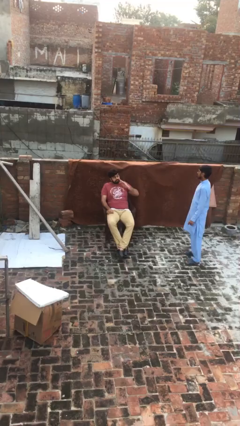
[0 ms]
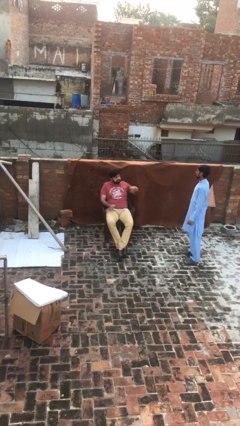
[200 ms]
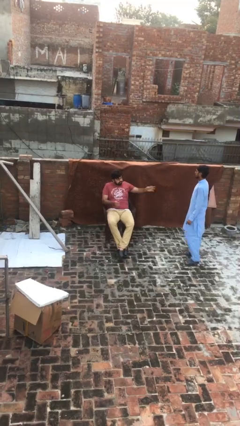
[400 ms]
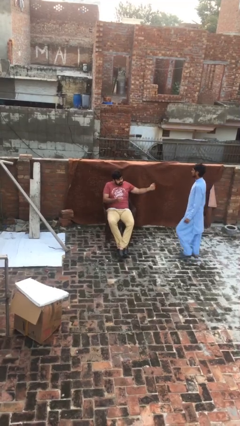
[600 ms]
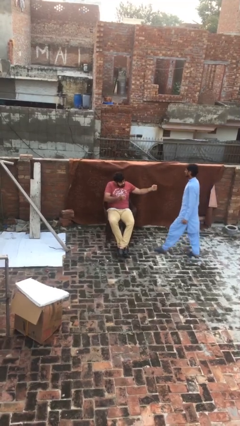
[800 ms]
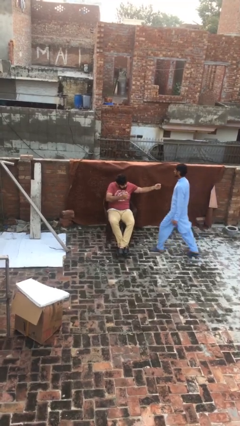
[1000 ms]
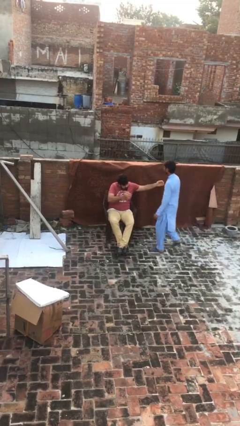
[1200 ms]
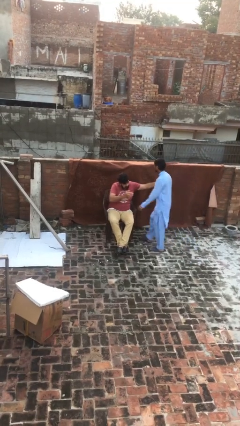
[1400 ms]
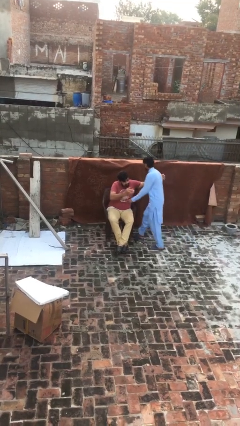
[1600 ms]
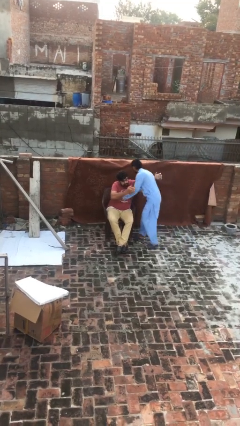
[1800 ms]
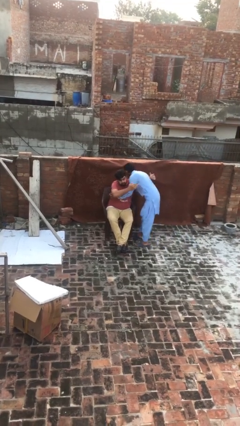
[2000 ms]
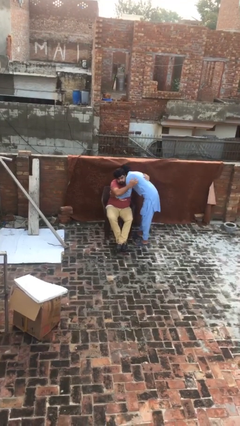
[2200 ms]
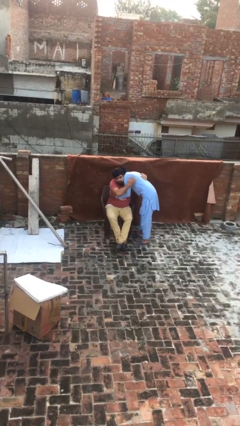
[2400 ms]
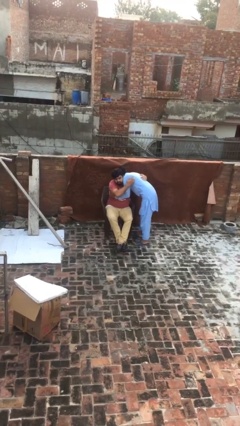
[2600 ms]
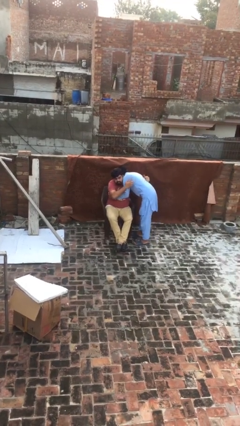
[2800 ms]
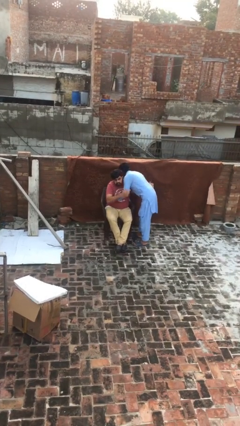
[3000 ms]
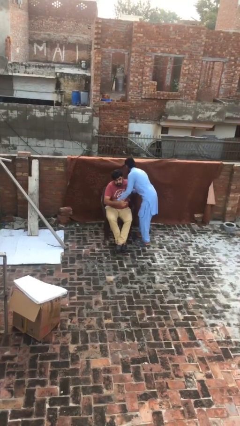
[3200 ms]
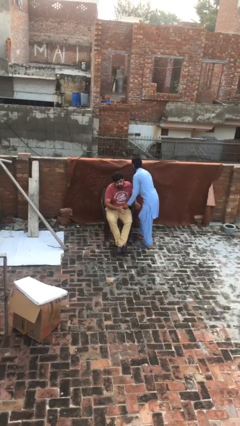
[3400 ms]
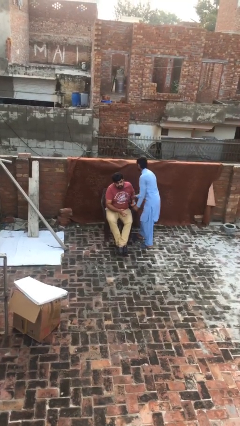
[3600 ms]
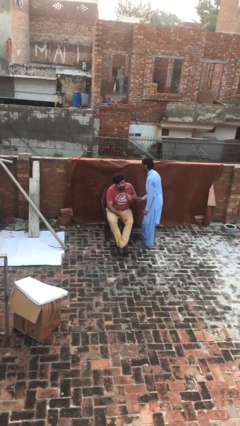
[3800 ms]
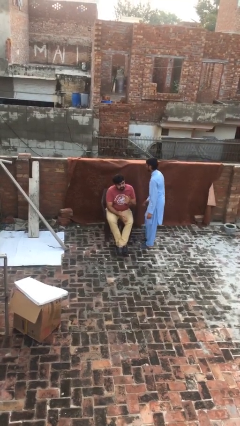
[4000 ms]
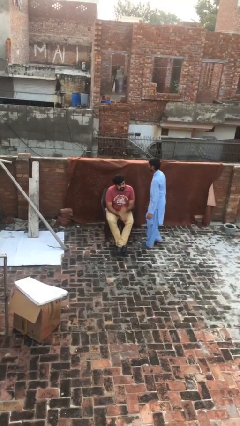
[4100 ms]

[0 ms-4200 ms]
person embraces person

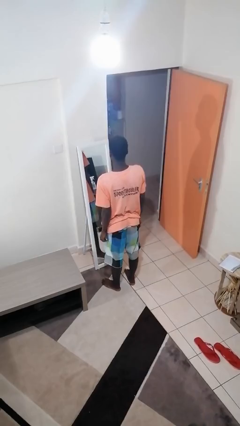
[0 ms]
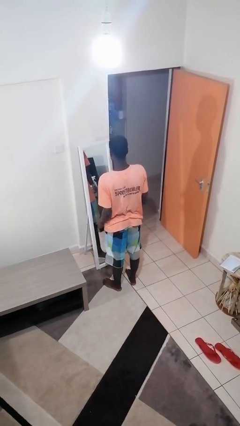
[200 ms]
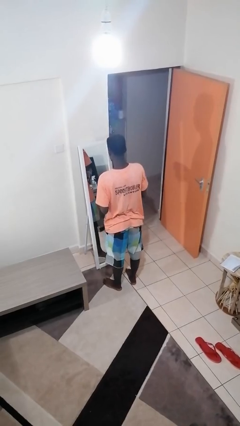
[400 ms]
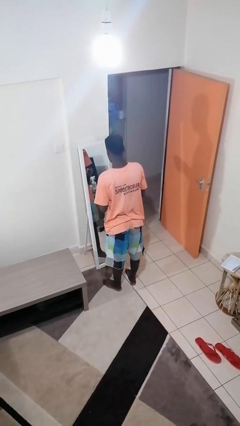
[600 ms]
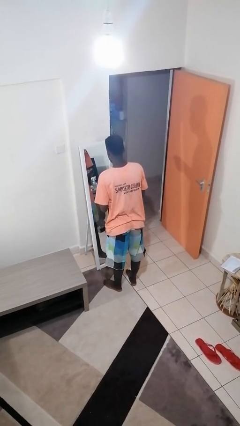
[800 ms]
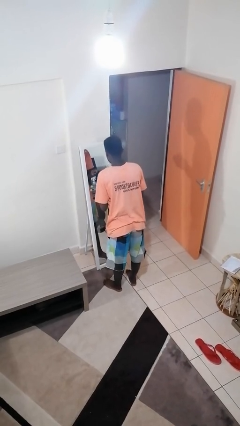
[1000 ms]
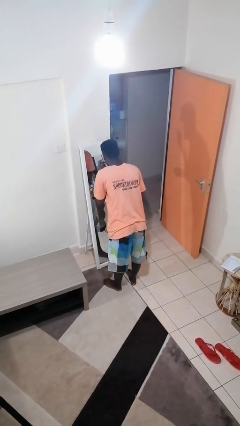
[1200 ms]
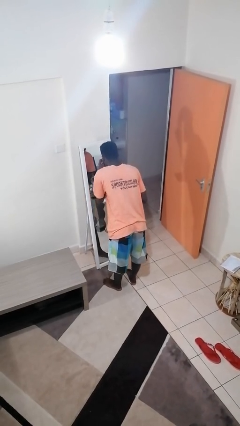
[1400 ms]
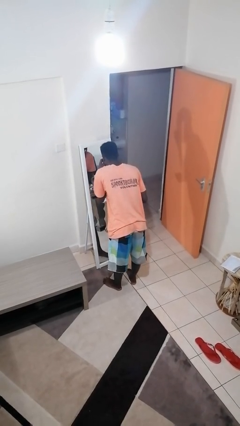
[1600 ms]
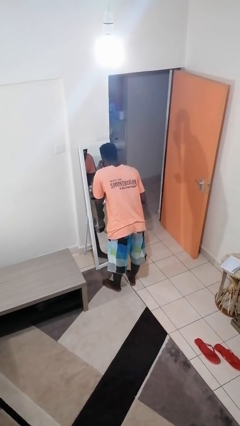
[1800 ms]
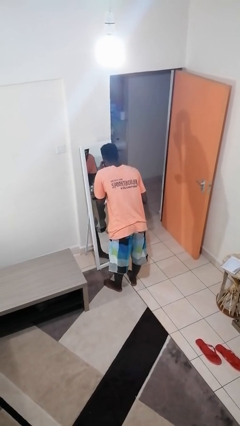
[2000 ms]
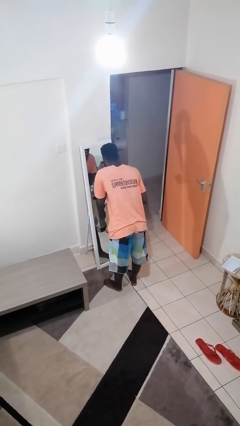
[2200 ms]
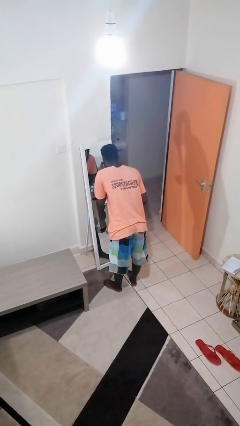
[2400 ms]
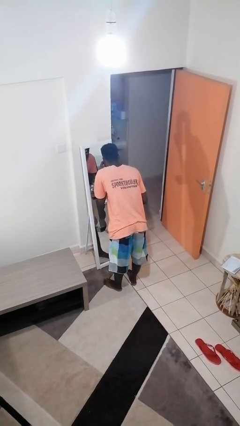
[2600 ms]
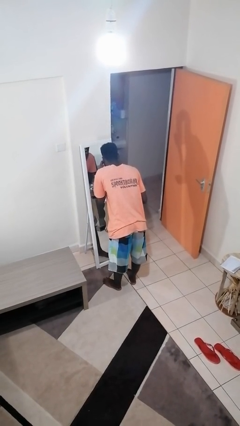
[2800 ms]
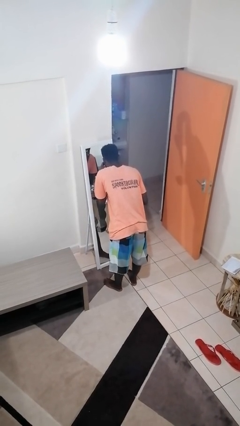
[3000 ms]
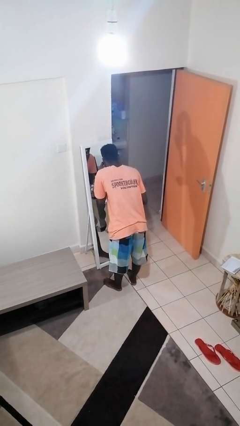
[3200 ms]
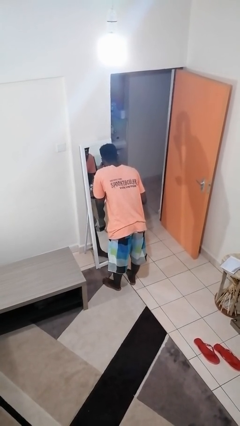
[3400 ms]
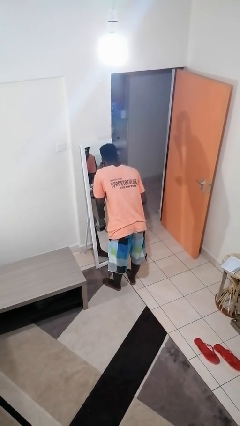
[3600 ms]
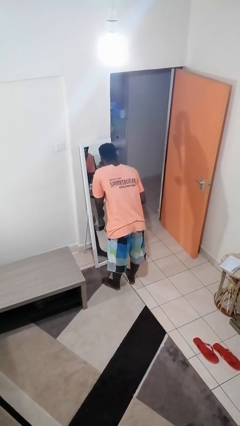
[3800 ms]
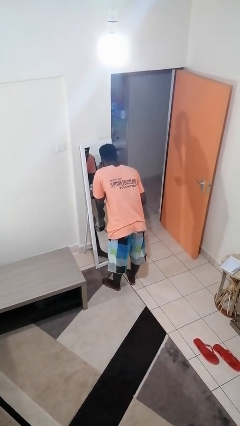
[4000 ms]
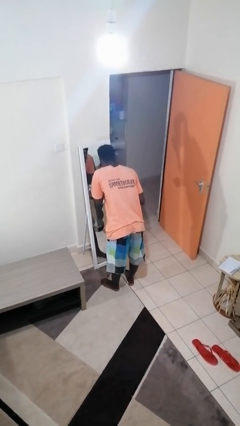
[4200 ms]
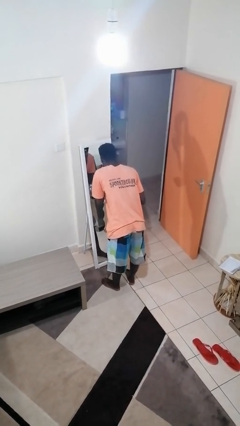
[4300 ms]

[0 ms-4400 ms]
person applies eye makeup

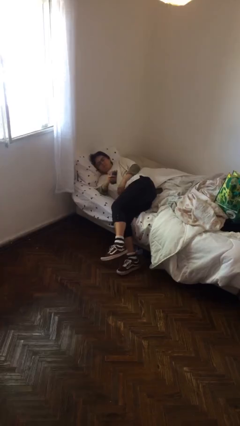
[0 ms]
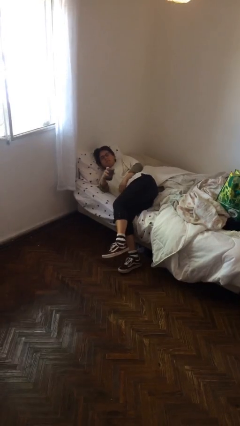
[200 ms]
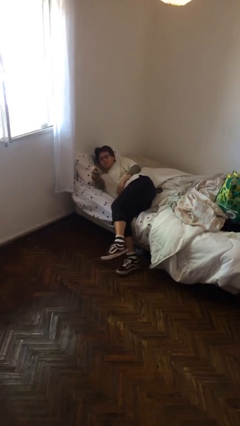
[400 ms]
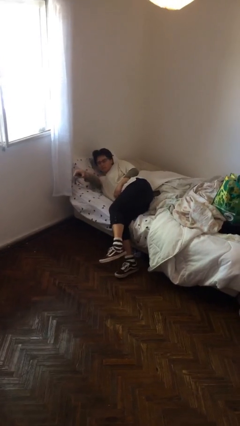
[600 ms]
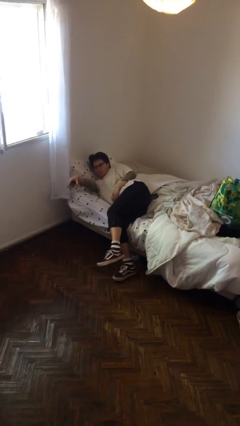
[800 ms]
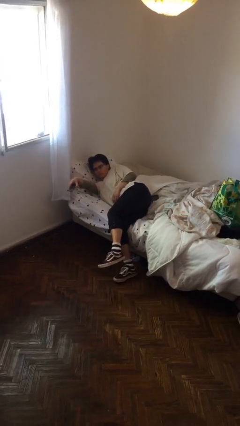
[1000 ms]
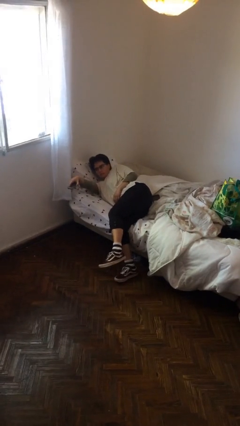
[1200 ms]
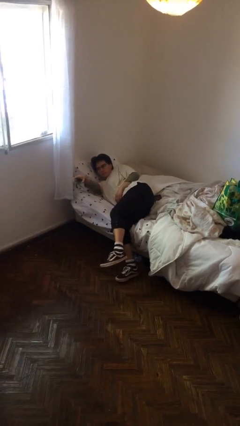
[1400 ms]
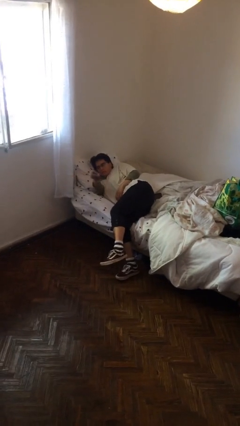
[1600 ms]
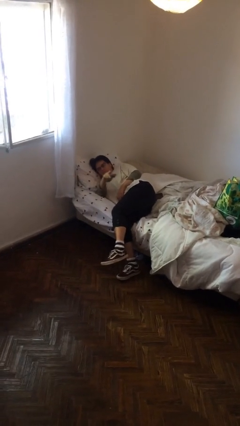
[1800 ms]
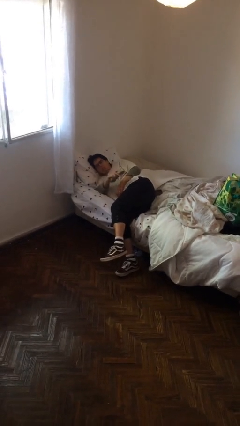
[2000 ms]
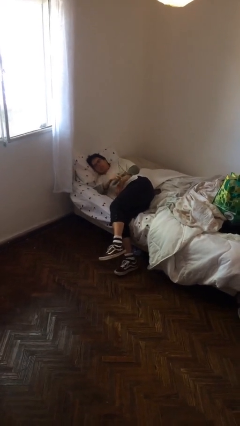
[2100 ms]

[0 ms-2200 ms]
person uses television remote

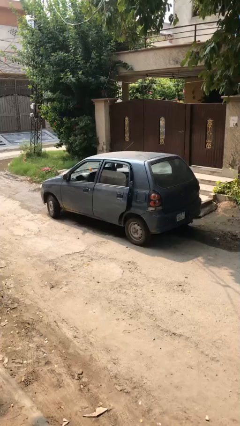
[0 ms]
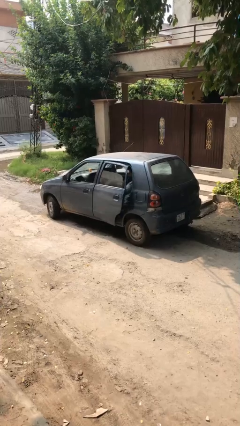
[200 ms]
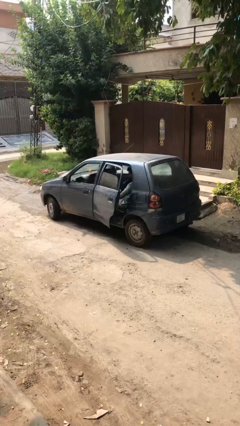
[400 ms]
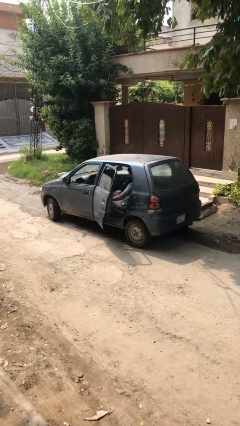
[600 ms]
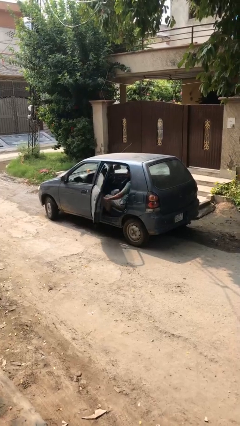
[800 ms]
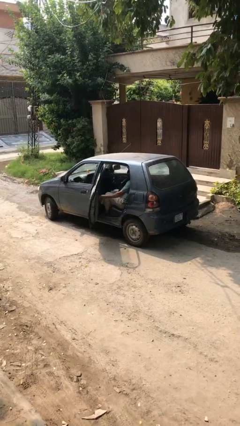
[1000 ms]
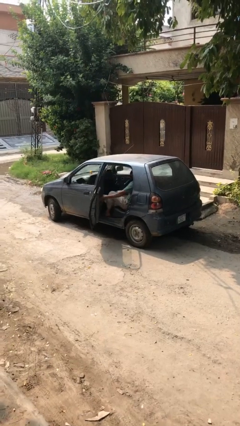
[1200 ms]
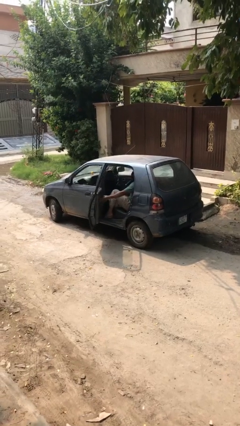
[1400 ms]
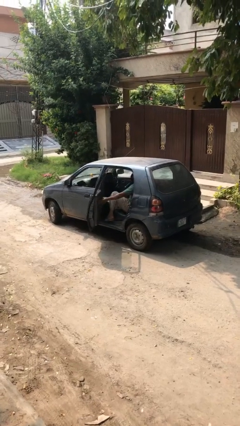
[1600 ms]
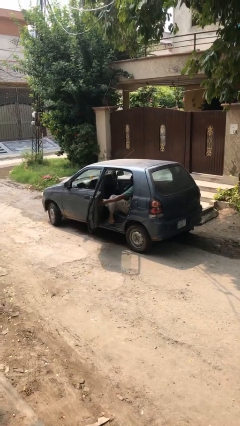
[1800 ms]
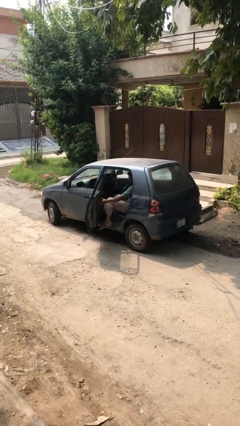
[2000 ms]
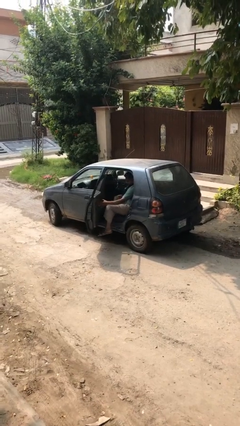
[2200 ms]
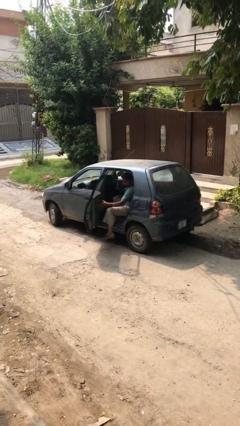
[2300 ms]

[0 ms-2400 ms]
person opens car door

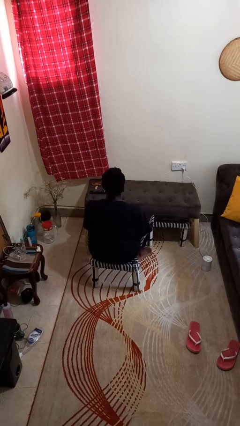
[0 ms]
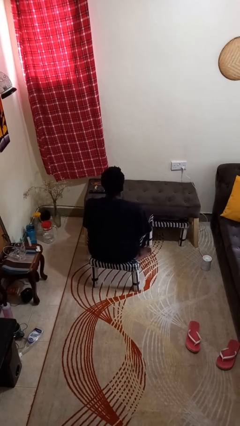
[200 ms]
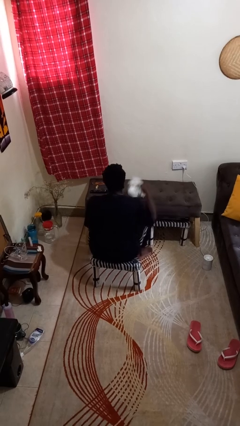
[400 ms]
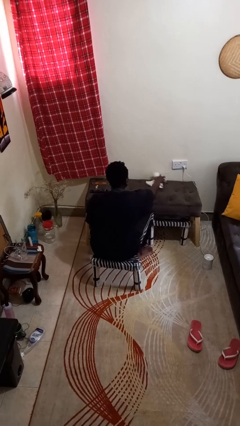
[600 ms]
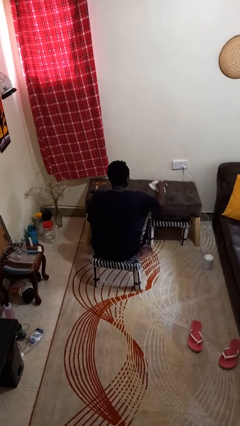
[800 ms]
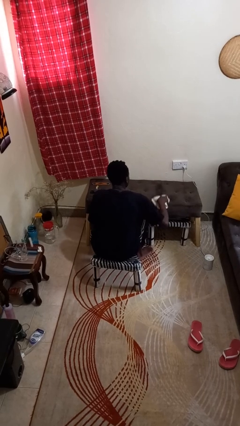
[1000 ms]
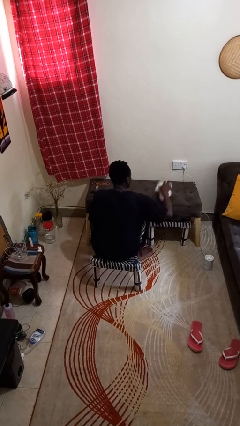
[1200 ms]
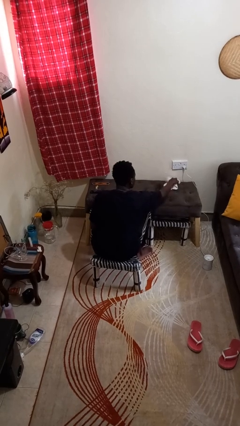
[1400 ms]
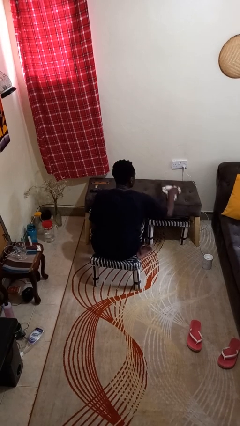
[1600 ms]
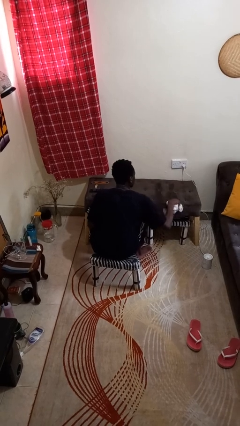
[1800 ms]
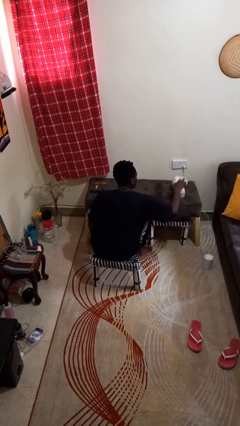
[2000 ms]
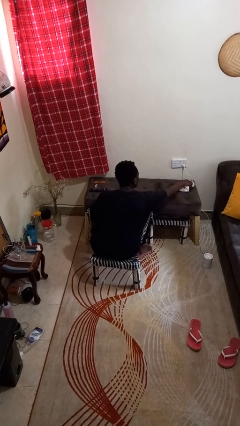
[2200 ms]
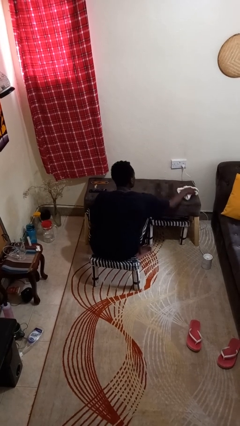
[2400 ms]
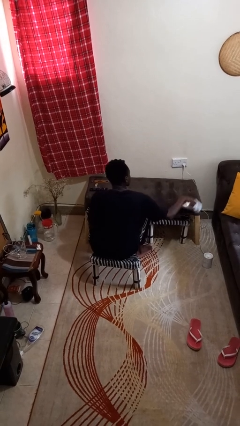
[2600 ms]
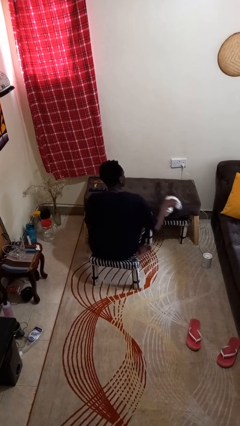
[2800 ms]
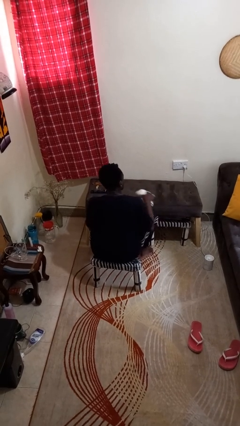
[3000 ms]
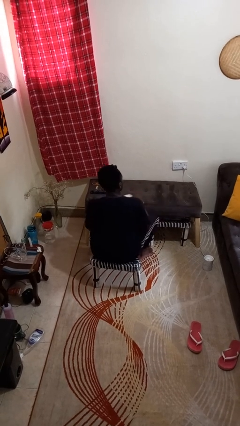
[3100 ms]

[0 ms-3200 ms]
person cleans table with rag

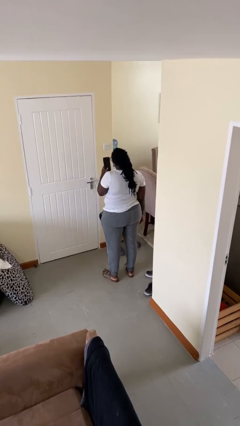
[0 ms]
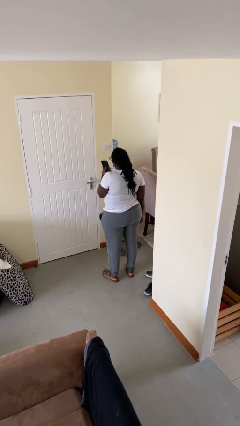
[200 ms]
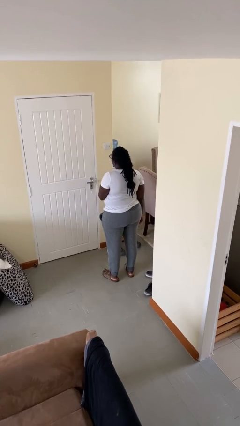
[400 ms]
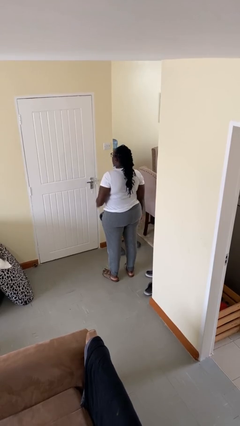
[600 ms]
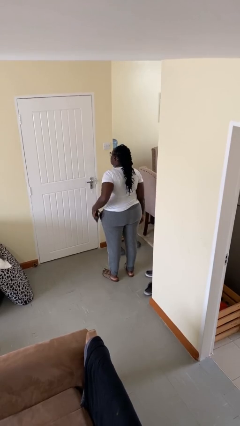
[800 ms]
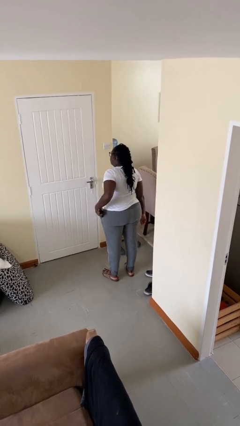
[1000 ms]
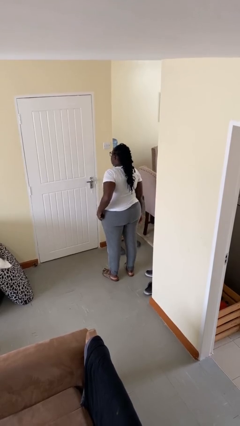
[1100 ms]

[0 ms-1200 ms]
person puts phone into pocket
